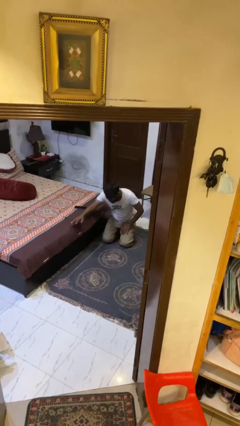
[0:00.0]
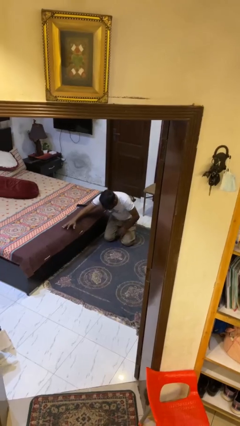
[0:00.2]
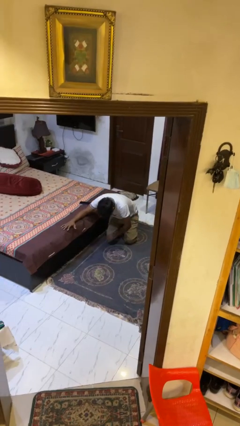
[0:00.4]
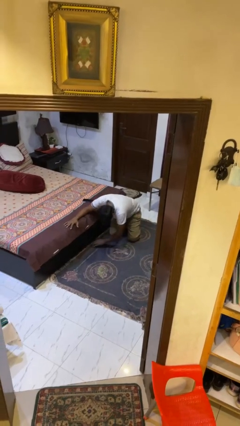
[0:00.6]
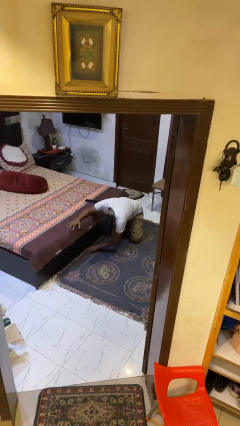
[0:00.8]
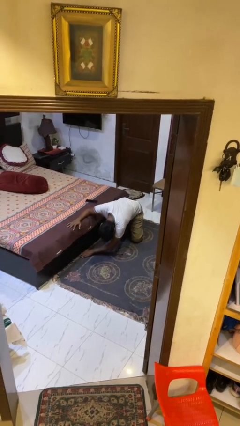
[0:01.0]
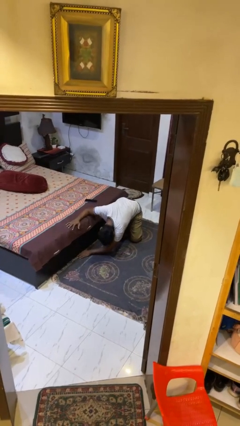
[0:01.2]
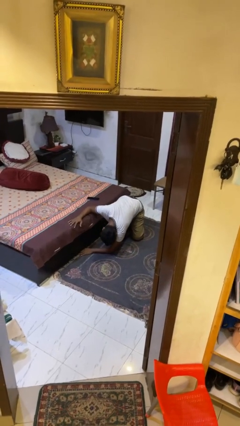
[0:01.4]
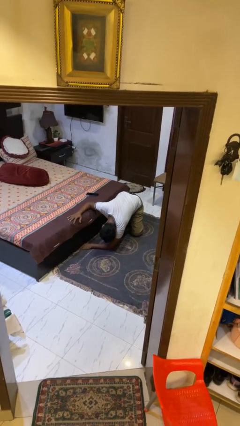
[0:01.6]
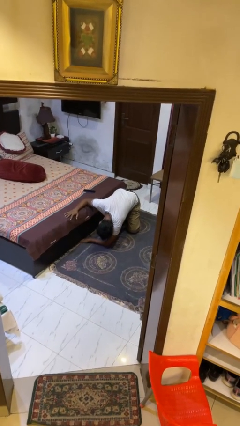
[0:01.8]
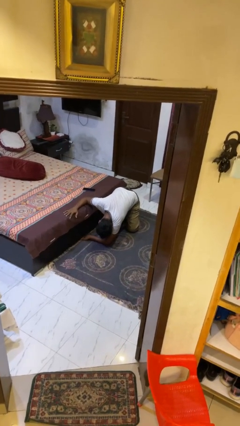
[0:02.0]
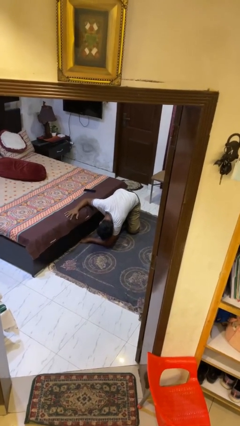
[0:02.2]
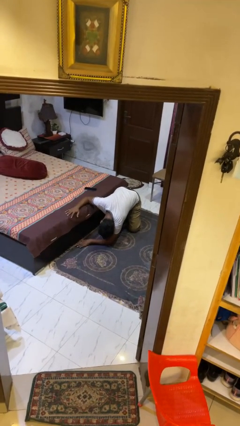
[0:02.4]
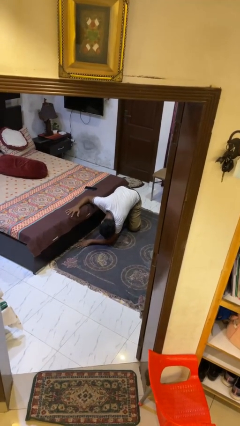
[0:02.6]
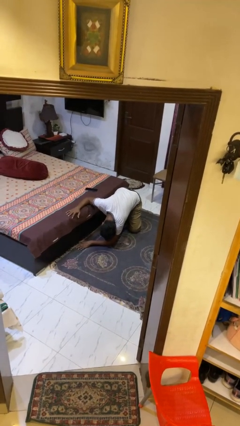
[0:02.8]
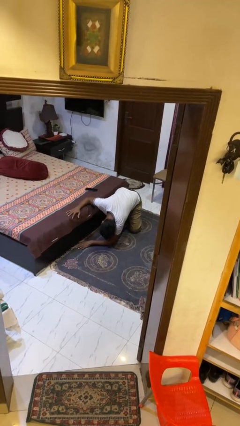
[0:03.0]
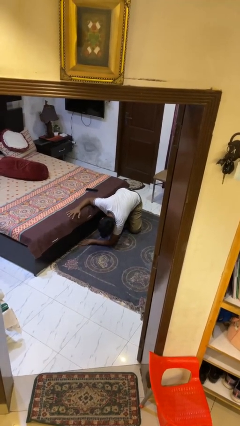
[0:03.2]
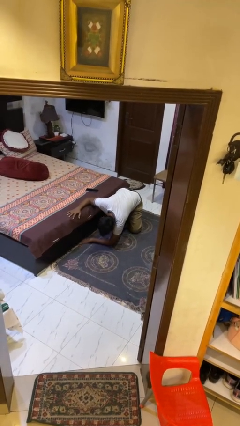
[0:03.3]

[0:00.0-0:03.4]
person searches under bed

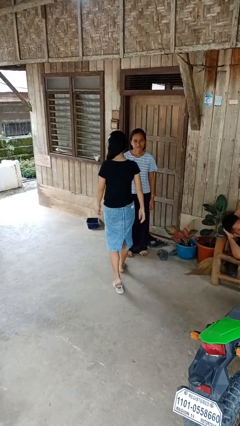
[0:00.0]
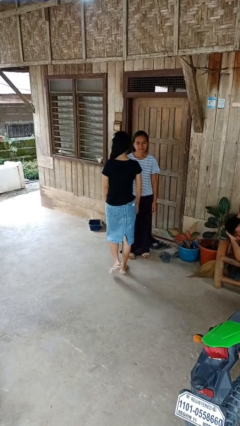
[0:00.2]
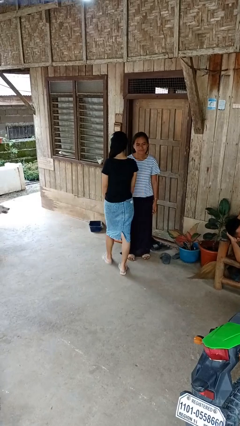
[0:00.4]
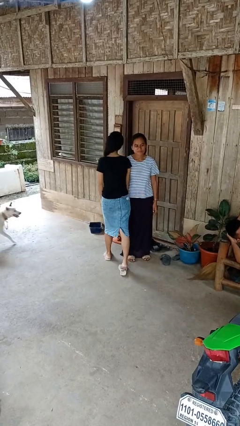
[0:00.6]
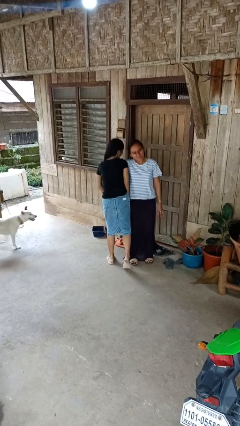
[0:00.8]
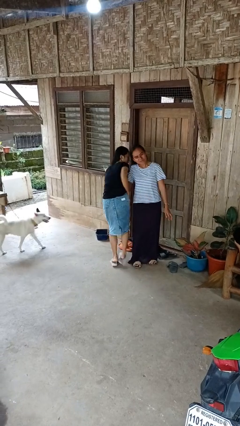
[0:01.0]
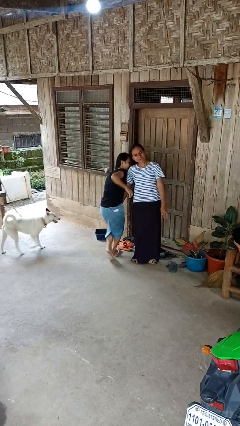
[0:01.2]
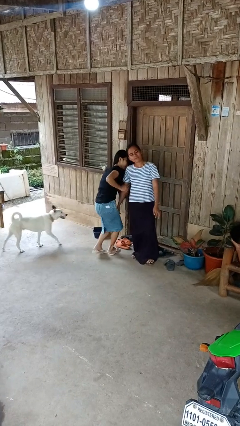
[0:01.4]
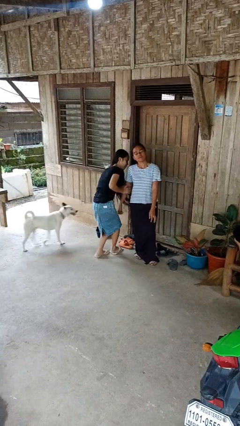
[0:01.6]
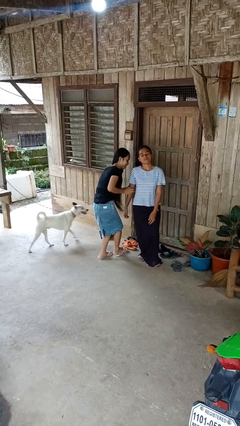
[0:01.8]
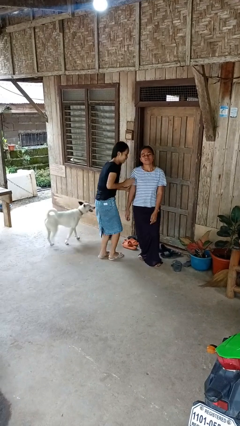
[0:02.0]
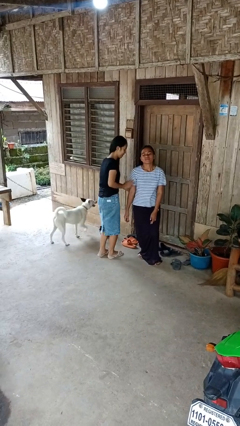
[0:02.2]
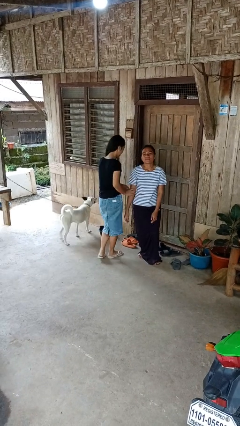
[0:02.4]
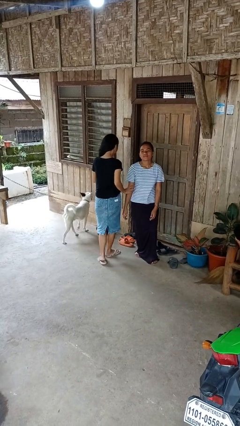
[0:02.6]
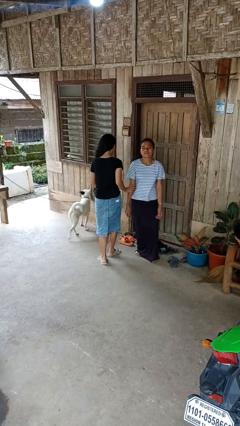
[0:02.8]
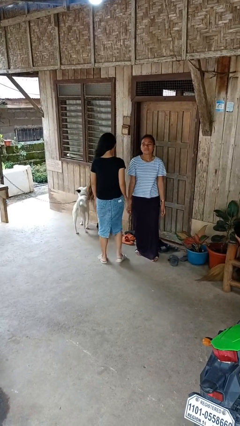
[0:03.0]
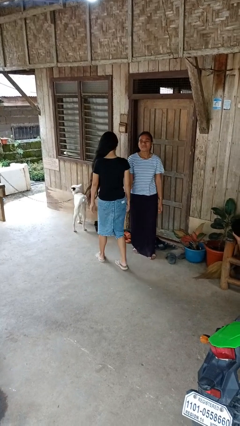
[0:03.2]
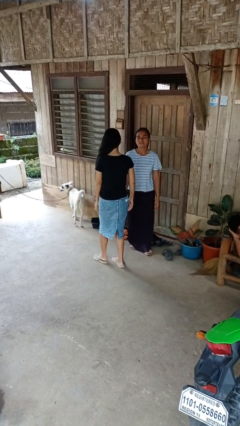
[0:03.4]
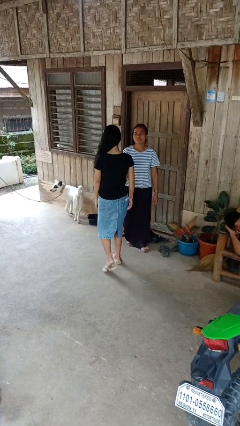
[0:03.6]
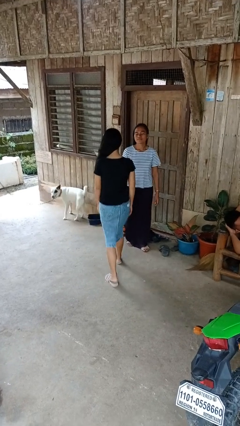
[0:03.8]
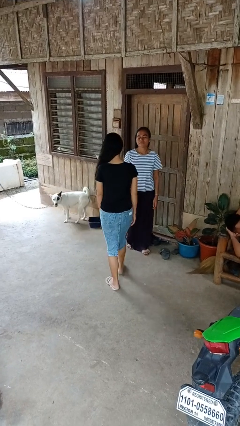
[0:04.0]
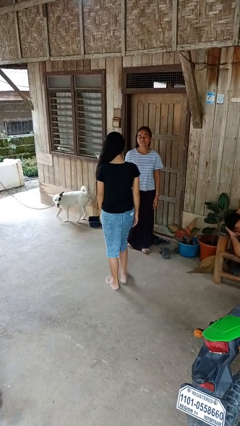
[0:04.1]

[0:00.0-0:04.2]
person bumps into person

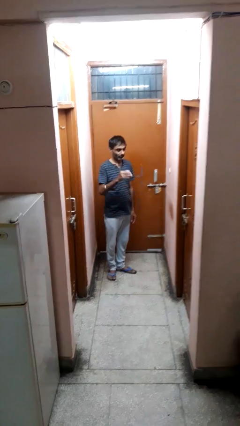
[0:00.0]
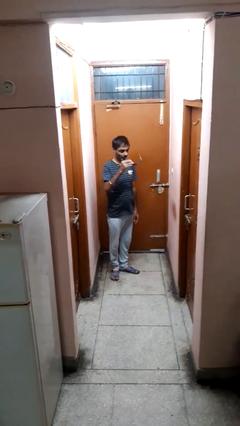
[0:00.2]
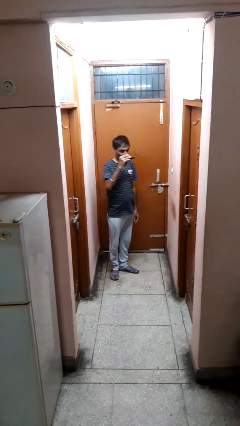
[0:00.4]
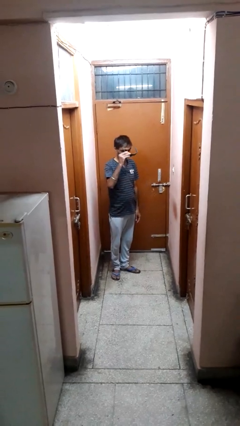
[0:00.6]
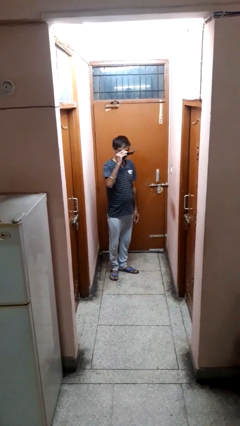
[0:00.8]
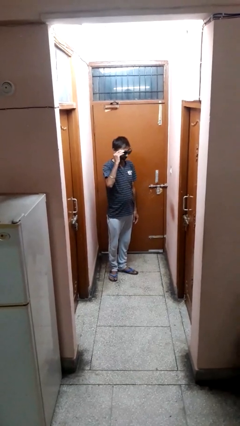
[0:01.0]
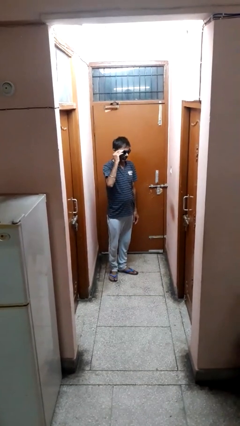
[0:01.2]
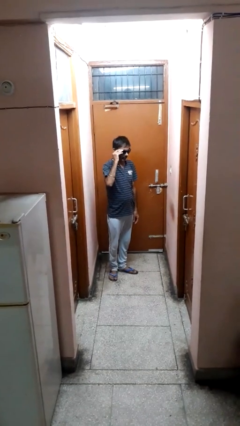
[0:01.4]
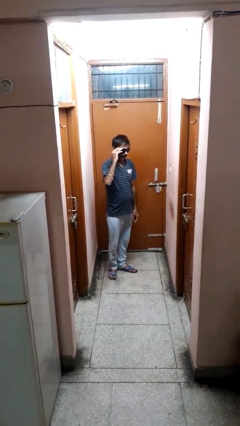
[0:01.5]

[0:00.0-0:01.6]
person puts on sunglasses

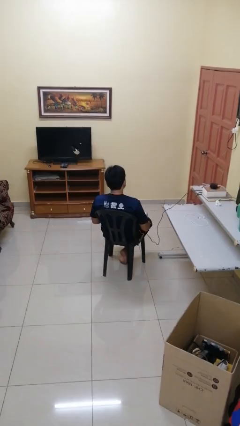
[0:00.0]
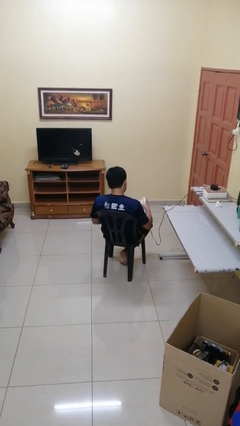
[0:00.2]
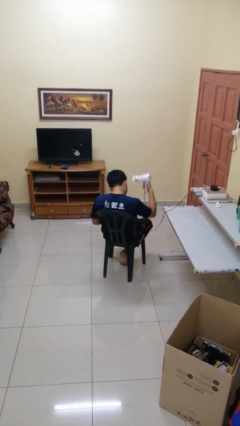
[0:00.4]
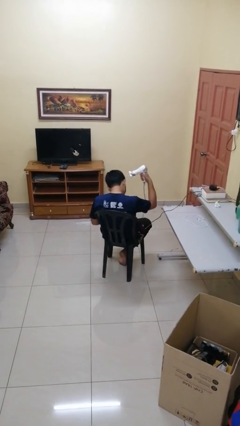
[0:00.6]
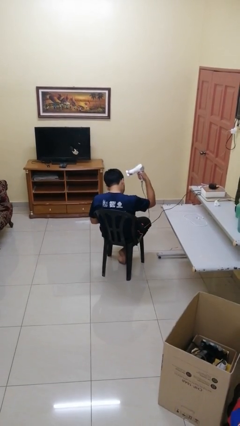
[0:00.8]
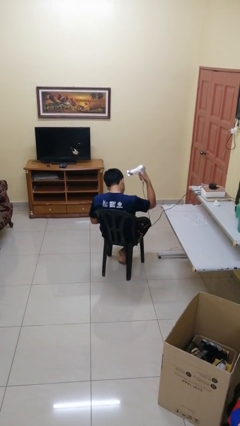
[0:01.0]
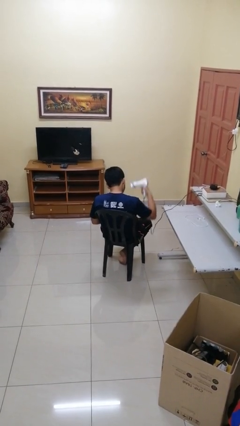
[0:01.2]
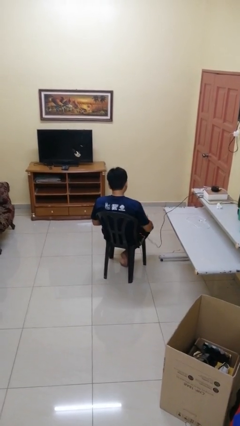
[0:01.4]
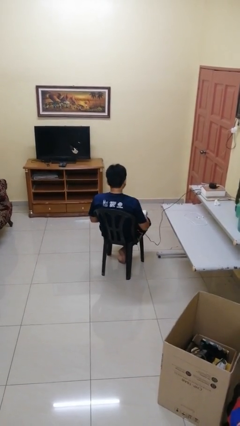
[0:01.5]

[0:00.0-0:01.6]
person dries hair with hairdryer

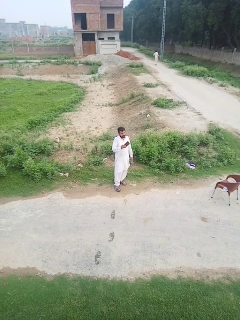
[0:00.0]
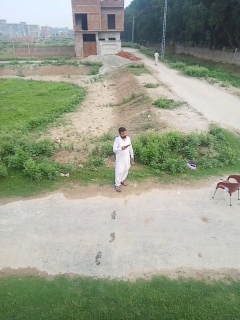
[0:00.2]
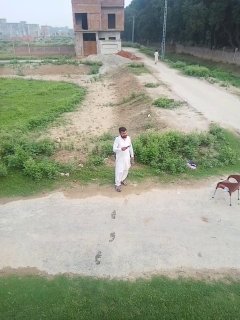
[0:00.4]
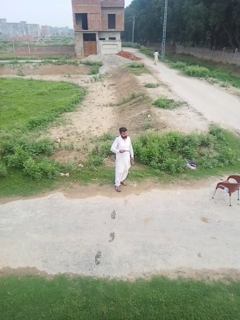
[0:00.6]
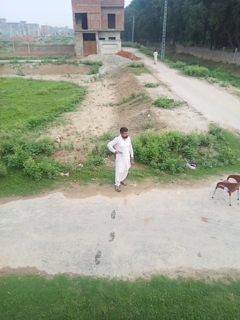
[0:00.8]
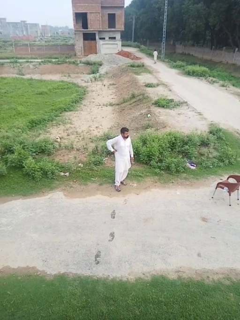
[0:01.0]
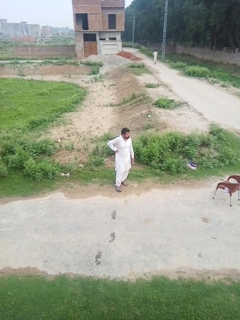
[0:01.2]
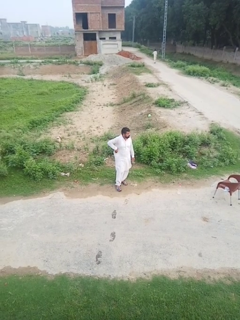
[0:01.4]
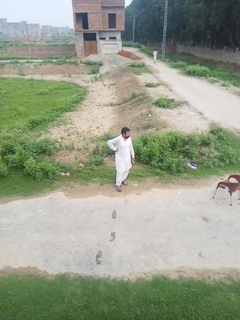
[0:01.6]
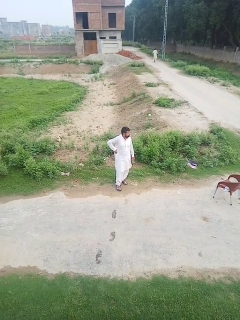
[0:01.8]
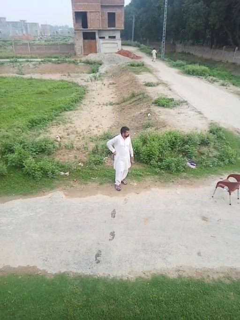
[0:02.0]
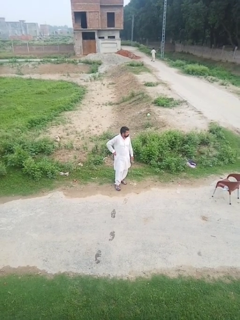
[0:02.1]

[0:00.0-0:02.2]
person puts phone into pocket

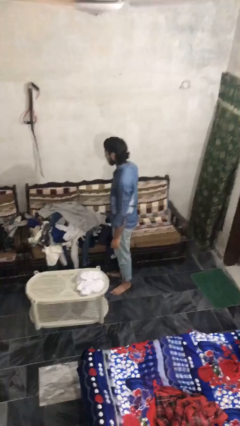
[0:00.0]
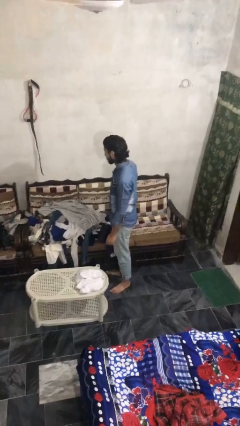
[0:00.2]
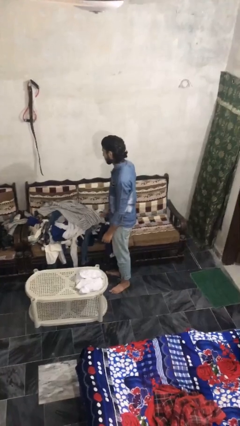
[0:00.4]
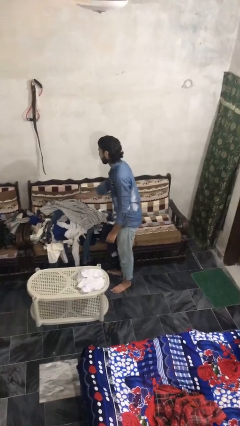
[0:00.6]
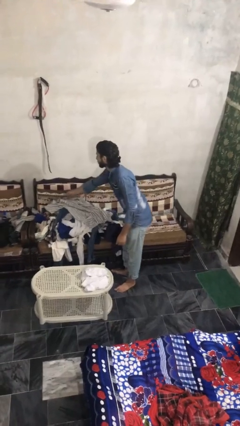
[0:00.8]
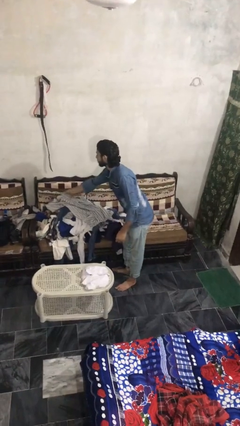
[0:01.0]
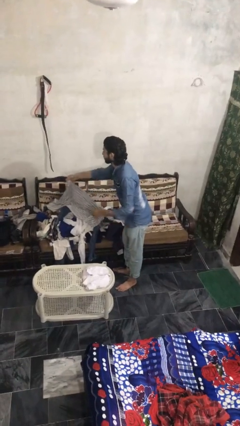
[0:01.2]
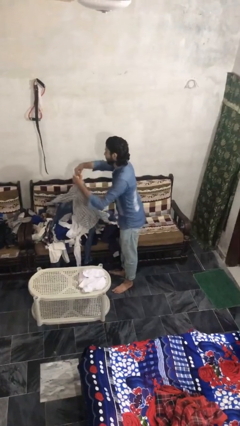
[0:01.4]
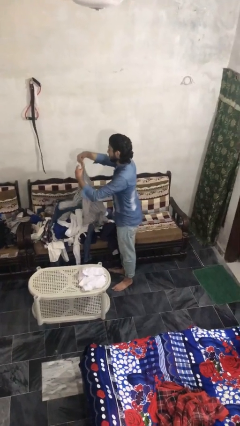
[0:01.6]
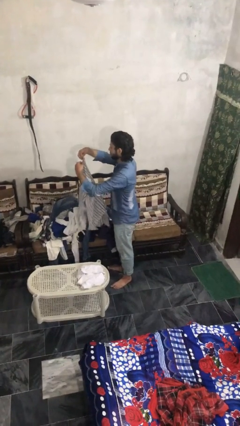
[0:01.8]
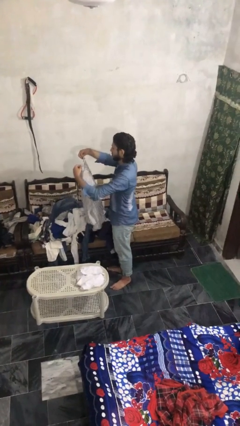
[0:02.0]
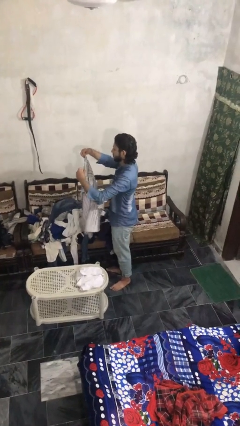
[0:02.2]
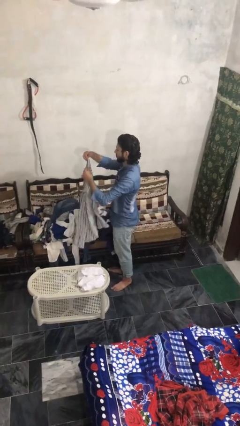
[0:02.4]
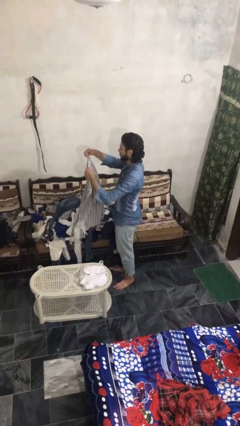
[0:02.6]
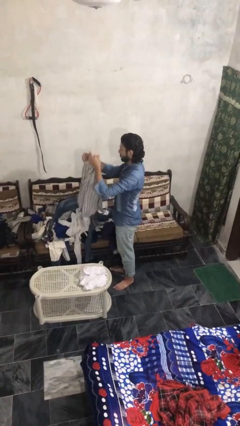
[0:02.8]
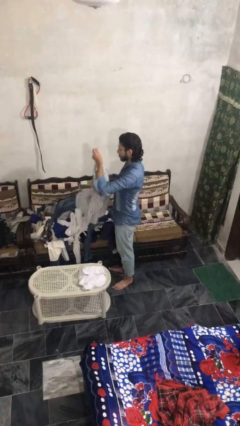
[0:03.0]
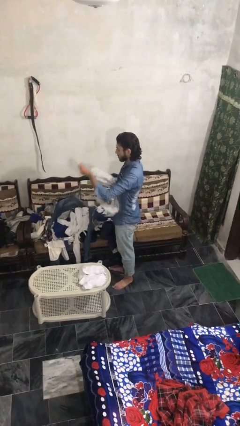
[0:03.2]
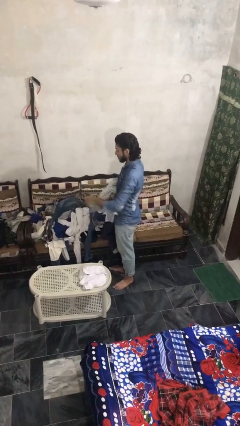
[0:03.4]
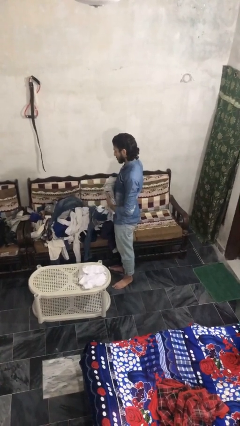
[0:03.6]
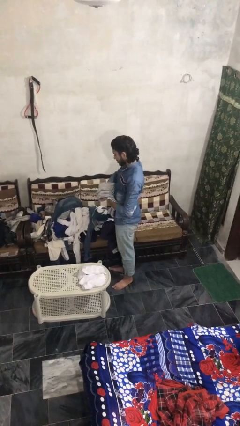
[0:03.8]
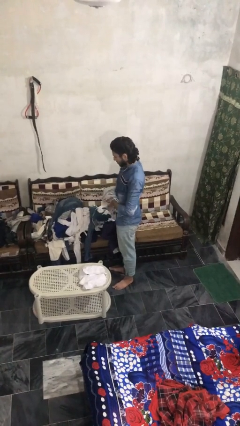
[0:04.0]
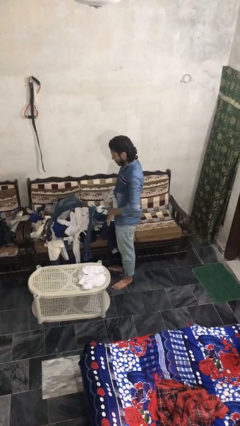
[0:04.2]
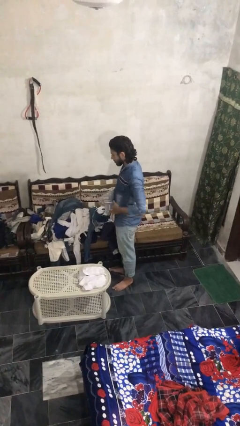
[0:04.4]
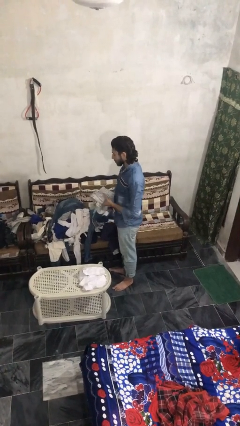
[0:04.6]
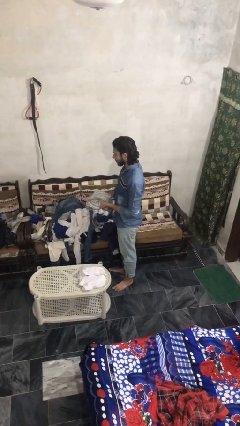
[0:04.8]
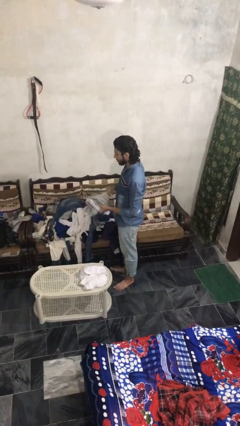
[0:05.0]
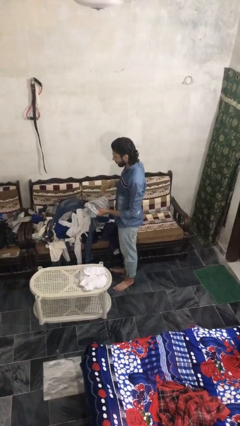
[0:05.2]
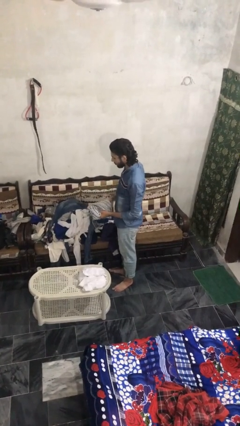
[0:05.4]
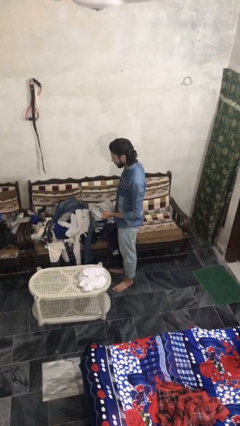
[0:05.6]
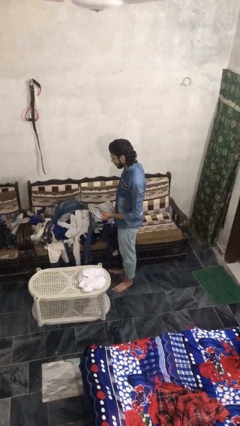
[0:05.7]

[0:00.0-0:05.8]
person folds shirt
